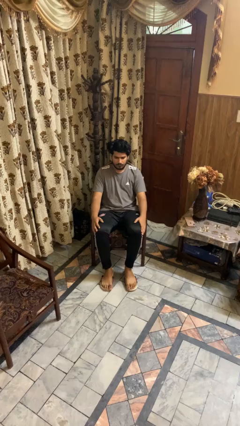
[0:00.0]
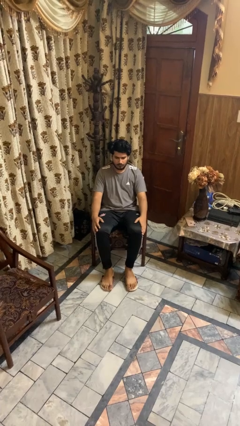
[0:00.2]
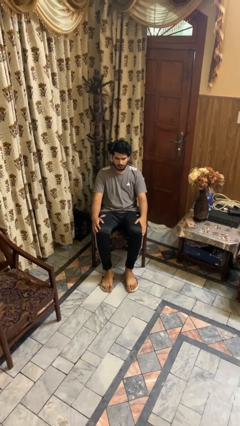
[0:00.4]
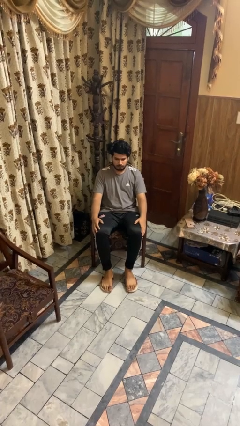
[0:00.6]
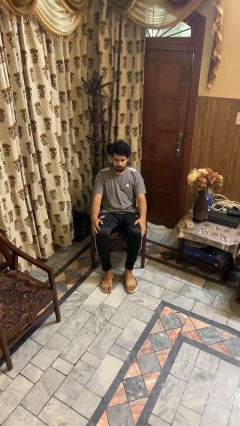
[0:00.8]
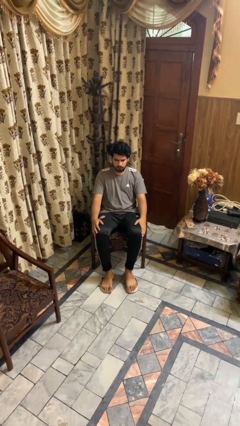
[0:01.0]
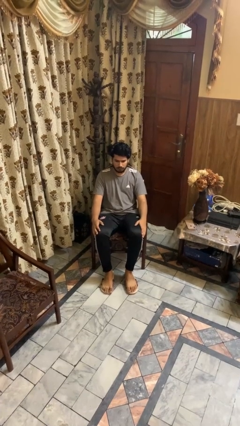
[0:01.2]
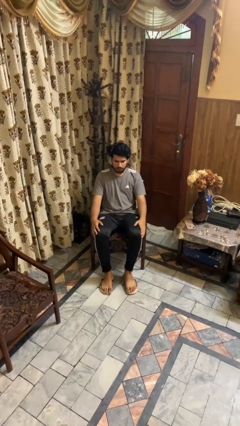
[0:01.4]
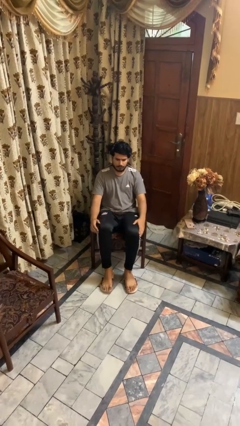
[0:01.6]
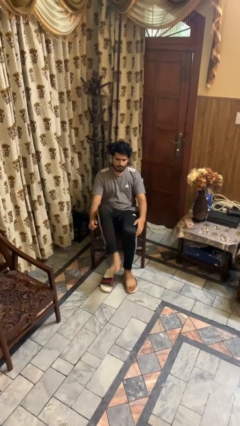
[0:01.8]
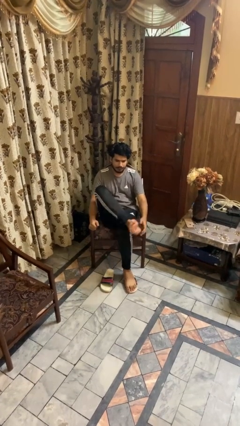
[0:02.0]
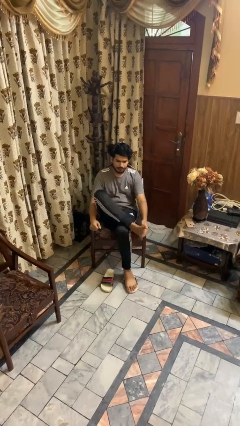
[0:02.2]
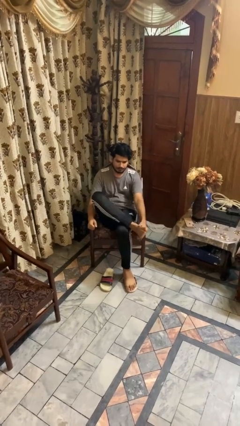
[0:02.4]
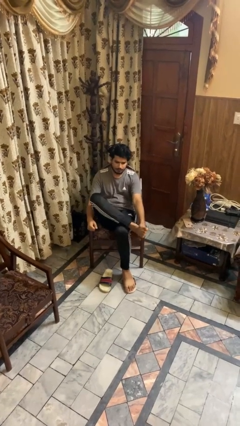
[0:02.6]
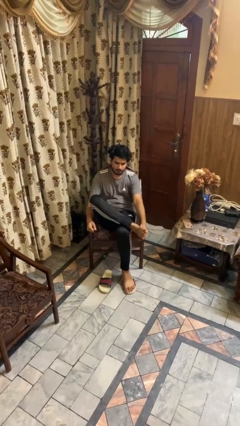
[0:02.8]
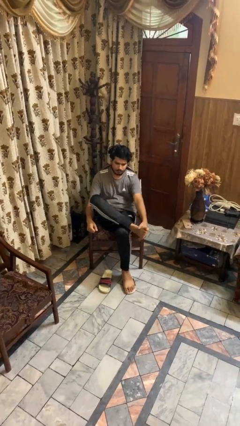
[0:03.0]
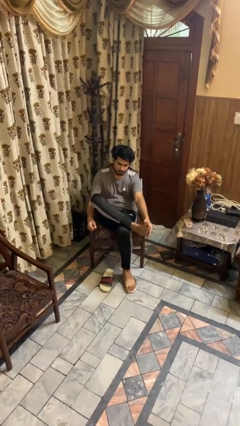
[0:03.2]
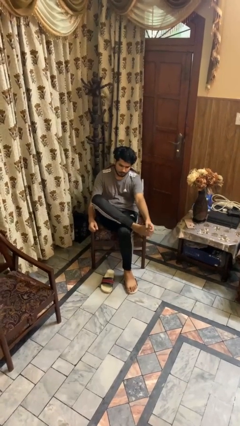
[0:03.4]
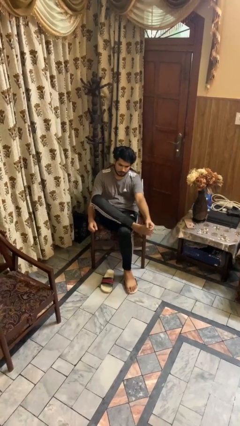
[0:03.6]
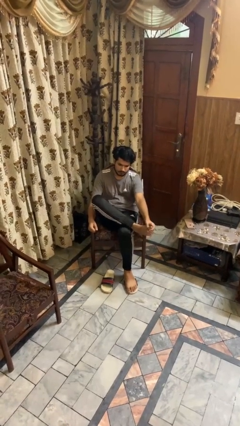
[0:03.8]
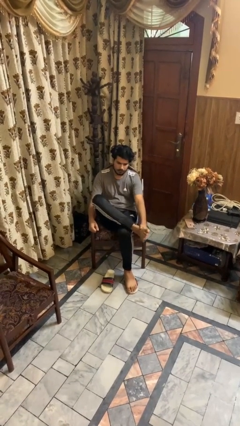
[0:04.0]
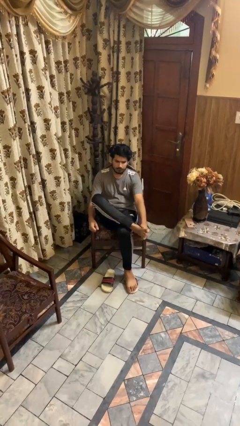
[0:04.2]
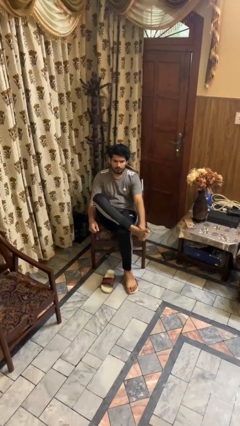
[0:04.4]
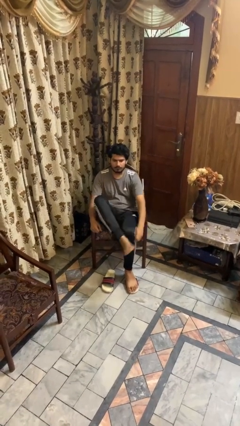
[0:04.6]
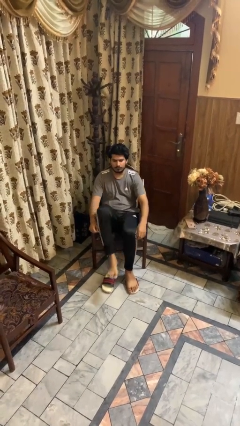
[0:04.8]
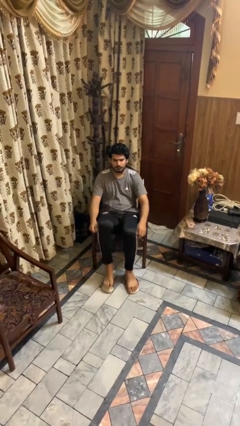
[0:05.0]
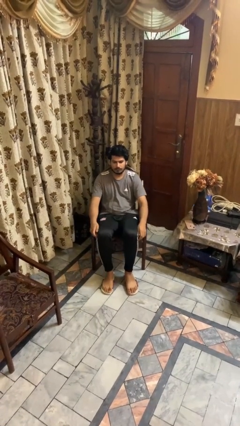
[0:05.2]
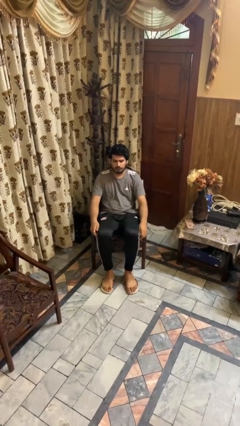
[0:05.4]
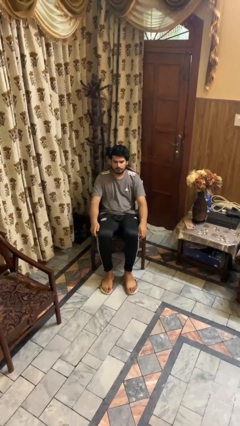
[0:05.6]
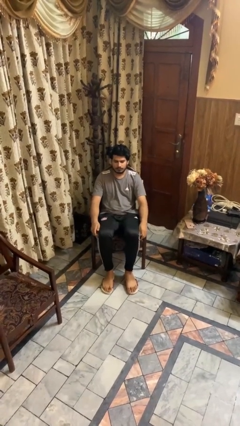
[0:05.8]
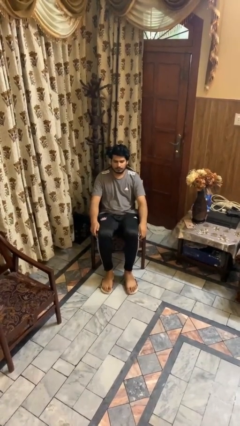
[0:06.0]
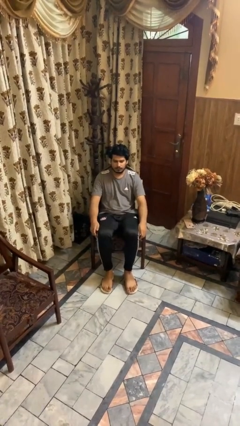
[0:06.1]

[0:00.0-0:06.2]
person rubs foot

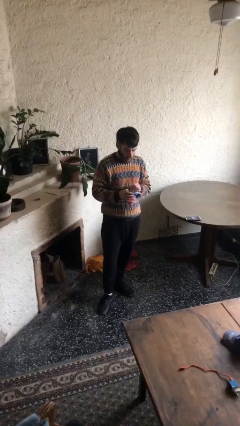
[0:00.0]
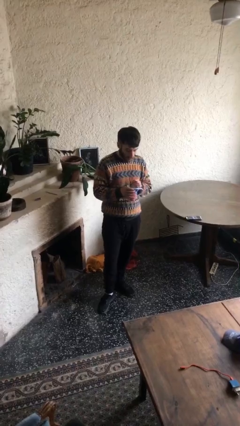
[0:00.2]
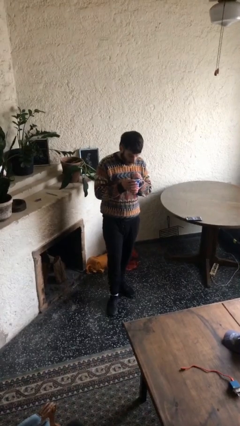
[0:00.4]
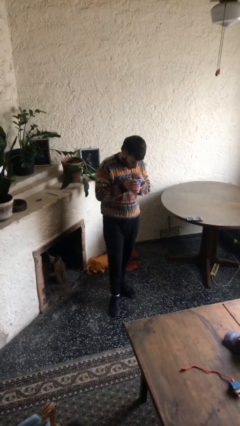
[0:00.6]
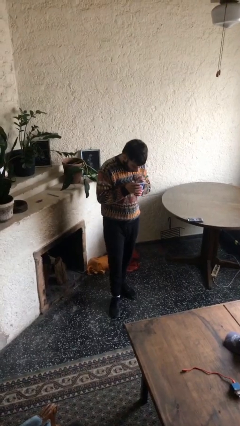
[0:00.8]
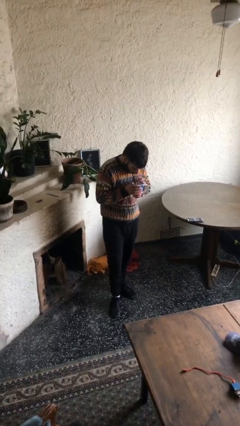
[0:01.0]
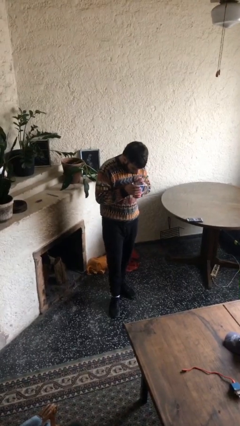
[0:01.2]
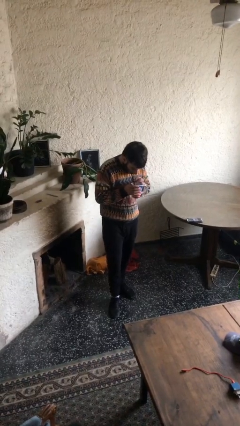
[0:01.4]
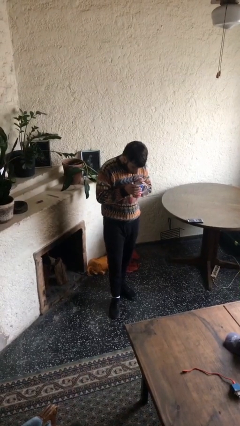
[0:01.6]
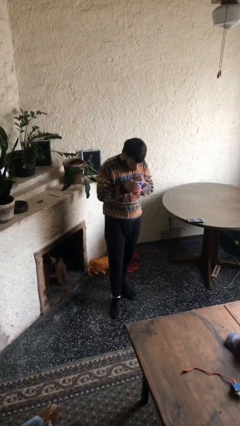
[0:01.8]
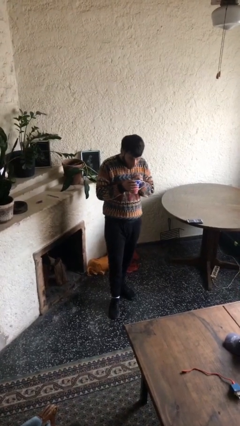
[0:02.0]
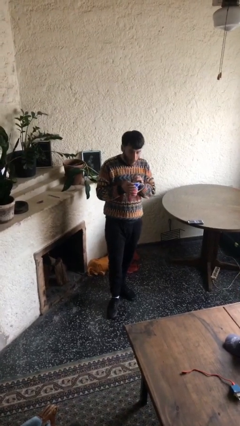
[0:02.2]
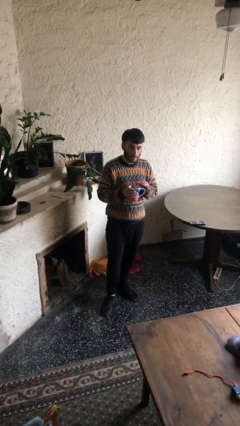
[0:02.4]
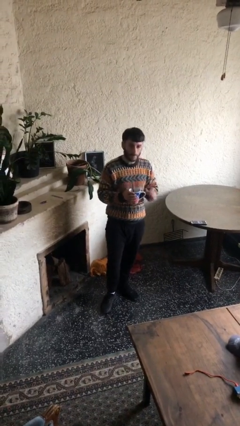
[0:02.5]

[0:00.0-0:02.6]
person drinks from straw

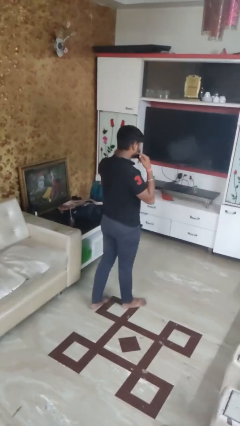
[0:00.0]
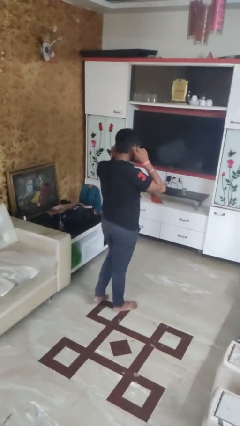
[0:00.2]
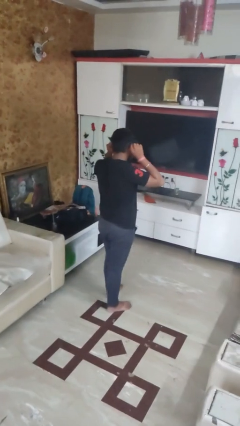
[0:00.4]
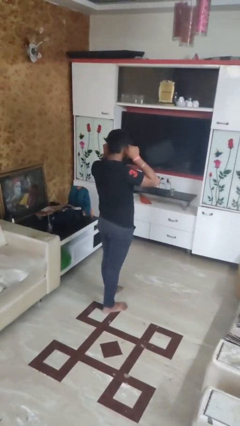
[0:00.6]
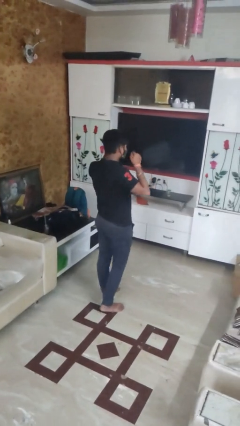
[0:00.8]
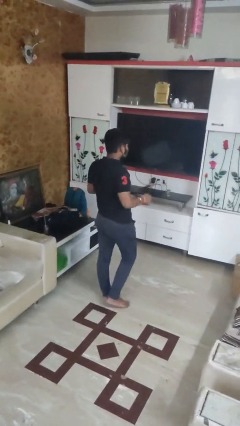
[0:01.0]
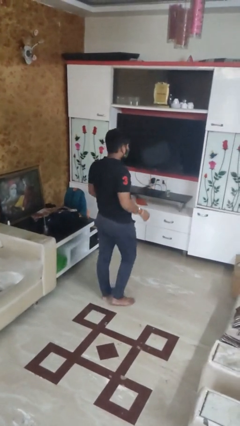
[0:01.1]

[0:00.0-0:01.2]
person puts on facemask

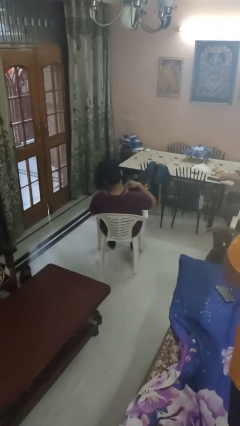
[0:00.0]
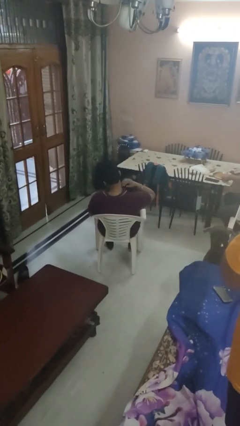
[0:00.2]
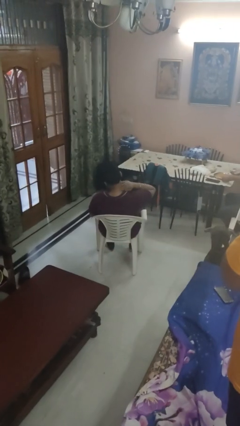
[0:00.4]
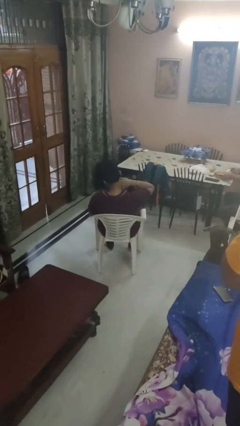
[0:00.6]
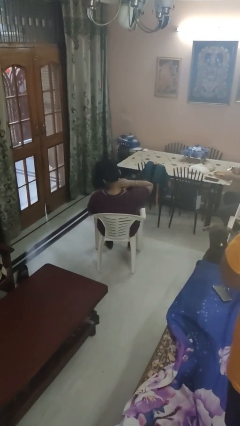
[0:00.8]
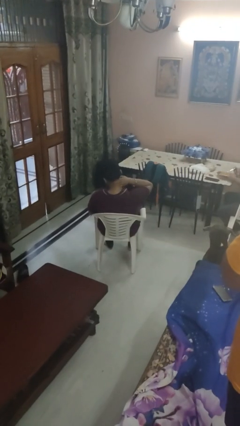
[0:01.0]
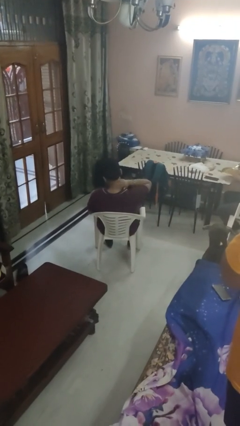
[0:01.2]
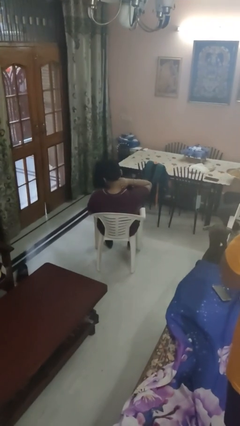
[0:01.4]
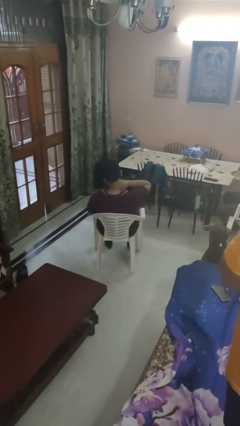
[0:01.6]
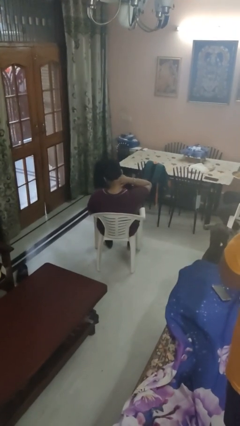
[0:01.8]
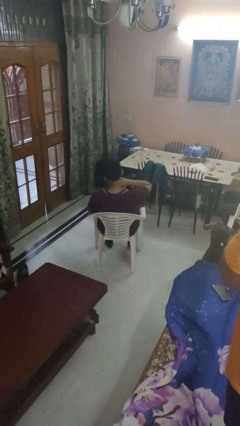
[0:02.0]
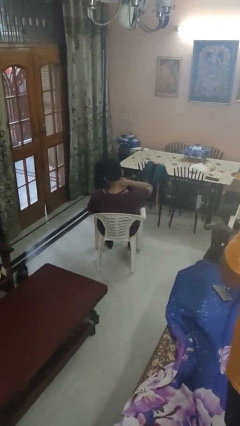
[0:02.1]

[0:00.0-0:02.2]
person rubs neck

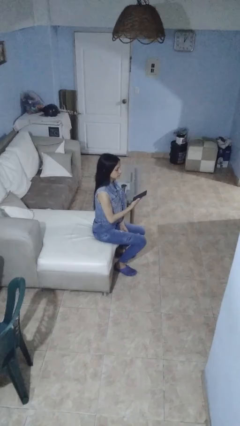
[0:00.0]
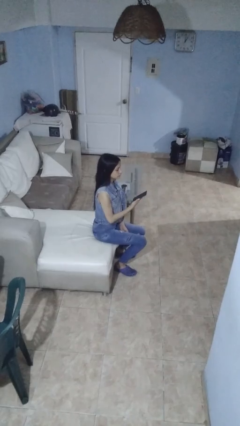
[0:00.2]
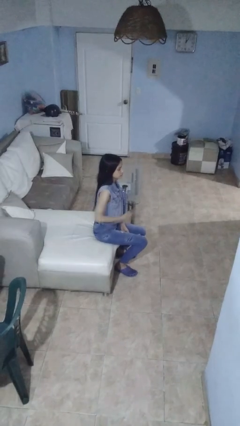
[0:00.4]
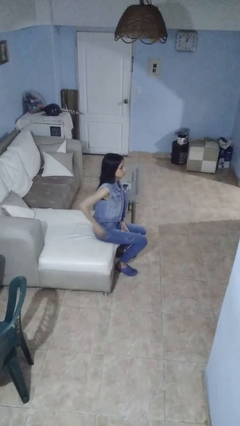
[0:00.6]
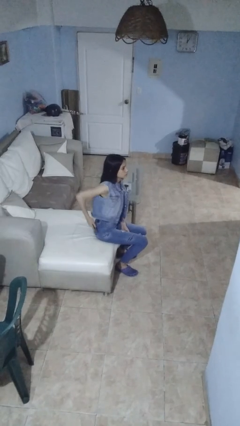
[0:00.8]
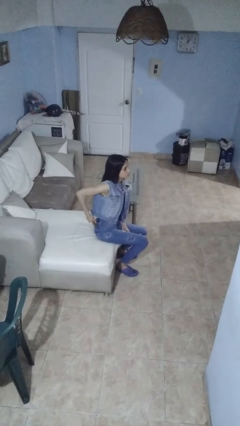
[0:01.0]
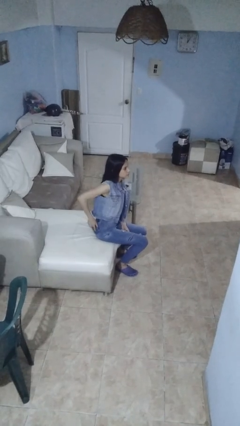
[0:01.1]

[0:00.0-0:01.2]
person puts phone into pocket

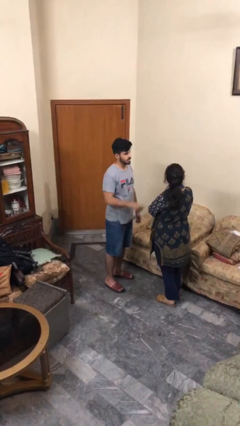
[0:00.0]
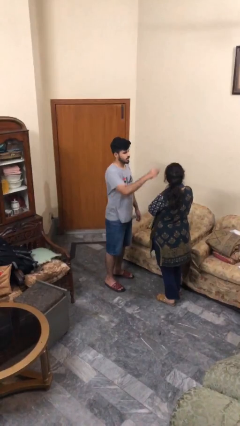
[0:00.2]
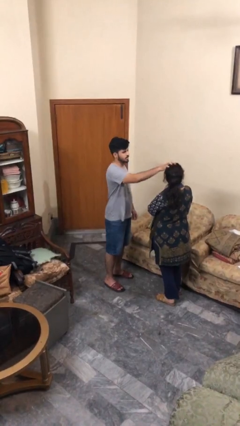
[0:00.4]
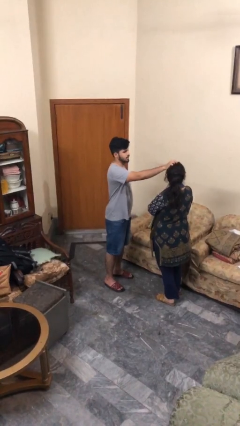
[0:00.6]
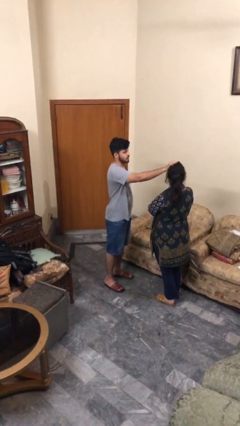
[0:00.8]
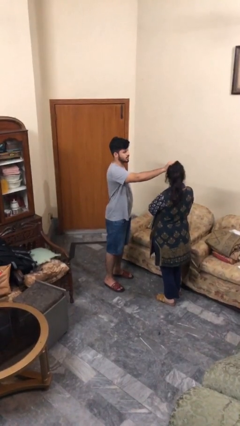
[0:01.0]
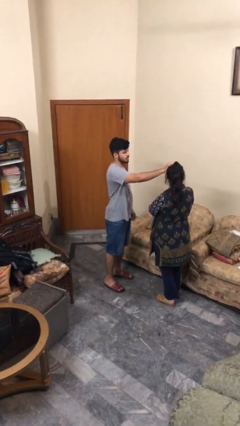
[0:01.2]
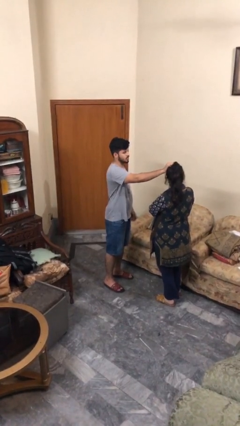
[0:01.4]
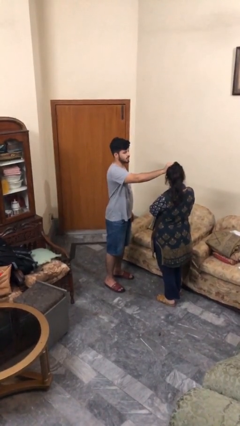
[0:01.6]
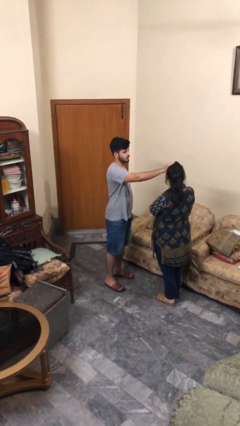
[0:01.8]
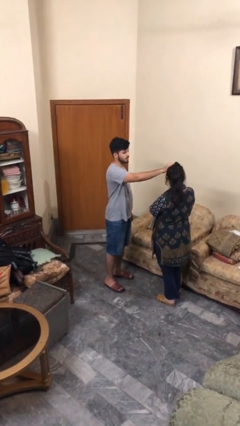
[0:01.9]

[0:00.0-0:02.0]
person grabs person by hair

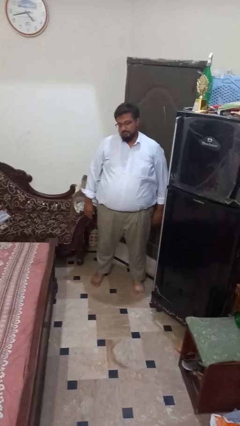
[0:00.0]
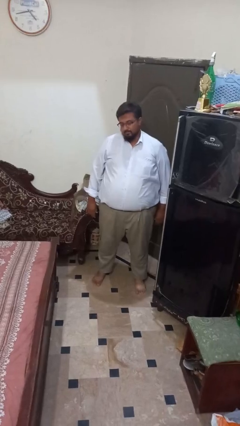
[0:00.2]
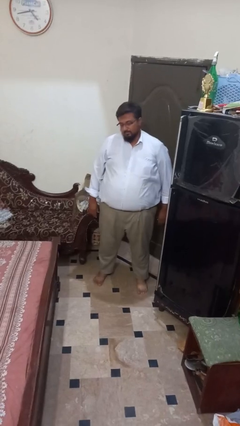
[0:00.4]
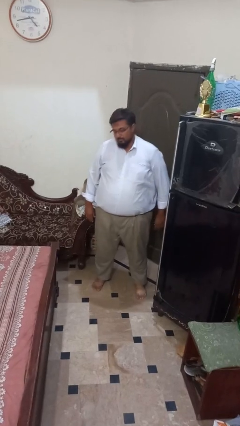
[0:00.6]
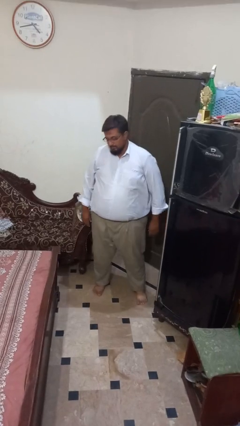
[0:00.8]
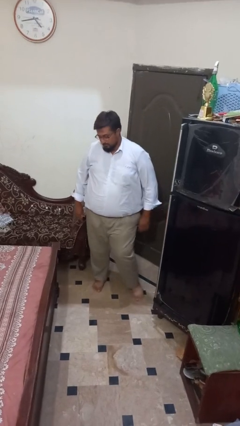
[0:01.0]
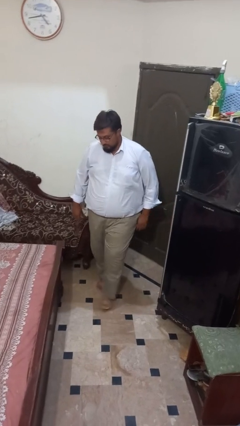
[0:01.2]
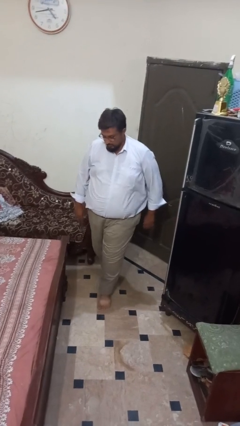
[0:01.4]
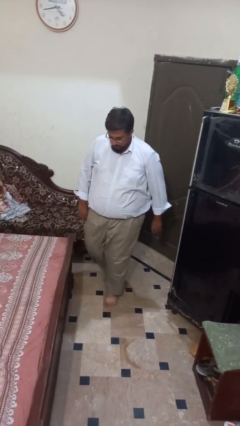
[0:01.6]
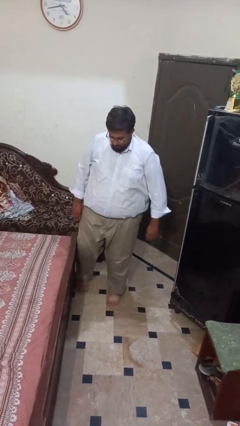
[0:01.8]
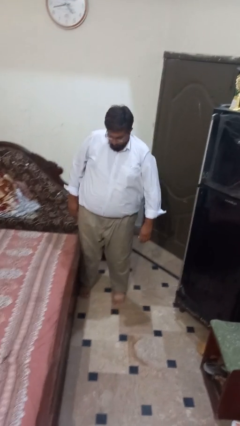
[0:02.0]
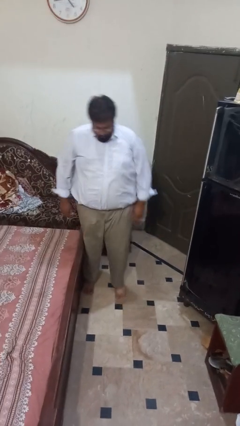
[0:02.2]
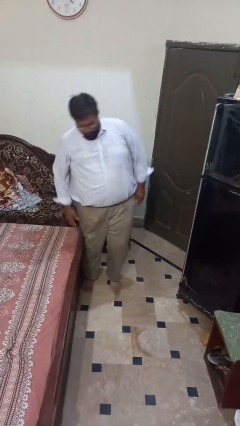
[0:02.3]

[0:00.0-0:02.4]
person trips on object on floor
